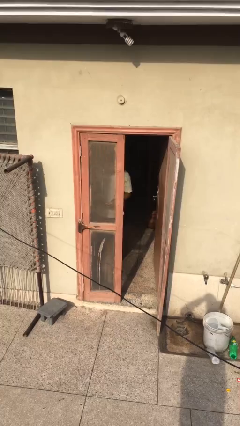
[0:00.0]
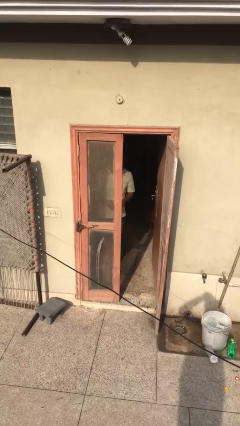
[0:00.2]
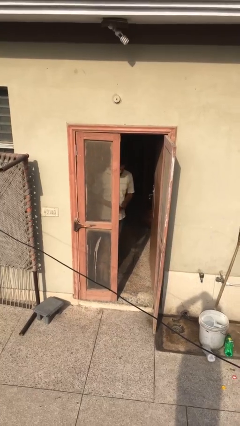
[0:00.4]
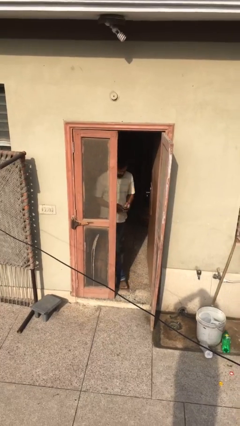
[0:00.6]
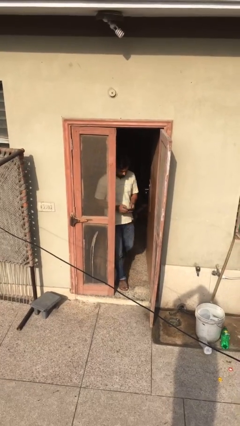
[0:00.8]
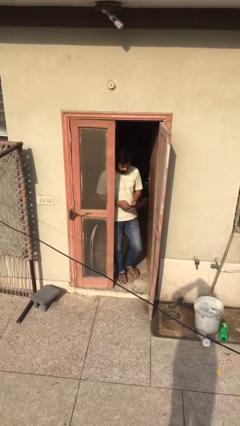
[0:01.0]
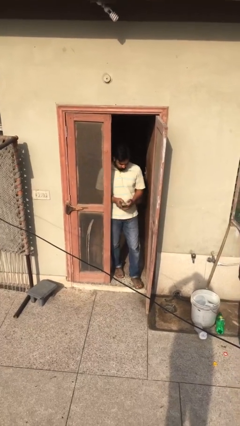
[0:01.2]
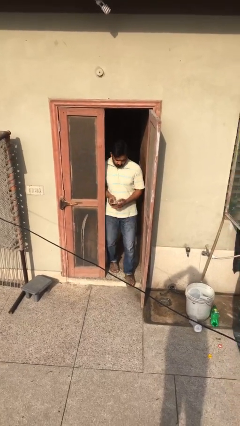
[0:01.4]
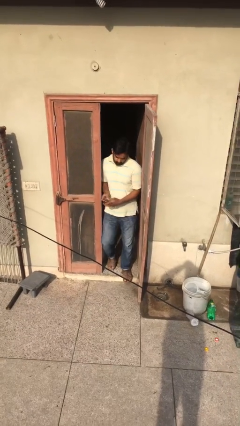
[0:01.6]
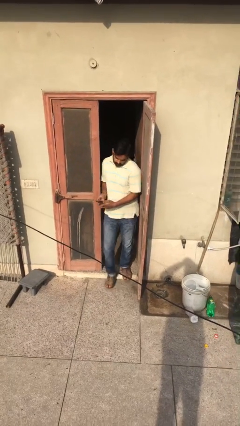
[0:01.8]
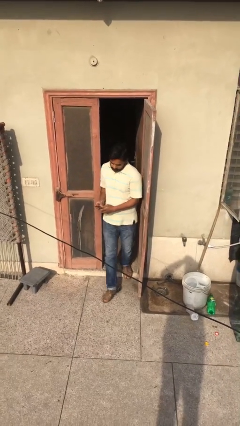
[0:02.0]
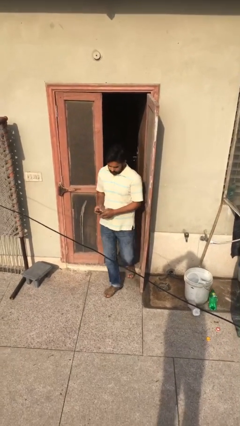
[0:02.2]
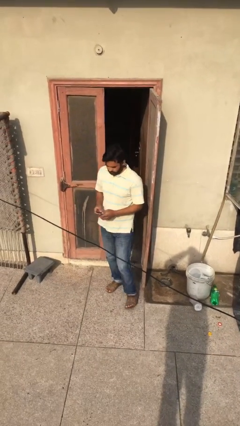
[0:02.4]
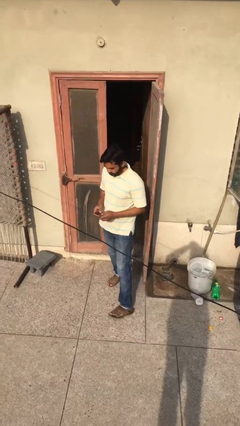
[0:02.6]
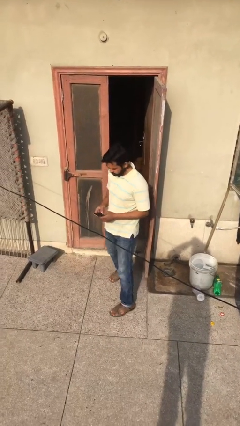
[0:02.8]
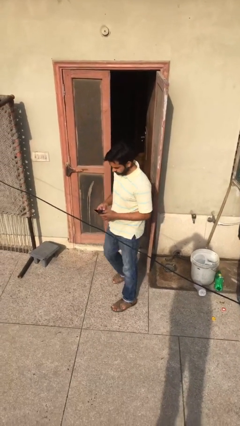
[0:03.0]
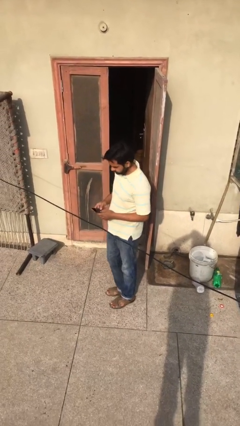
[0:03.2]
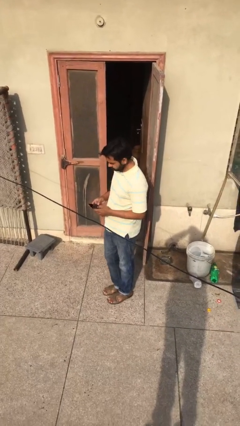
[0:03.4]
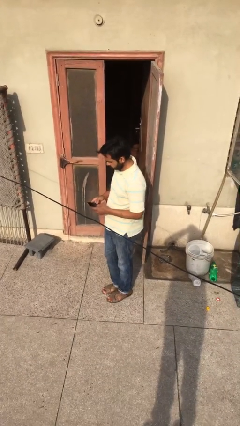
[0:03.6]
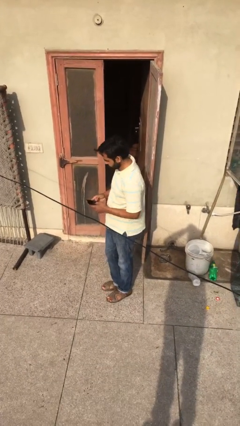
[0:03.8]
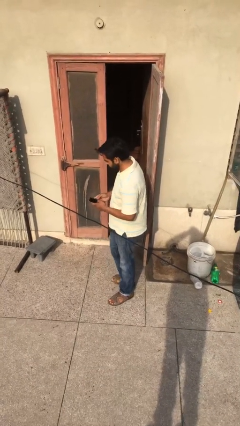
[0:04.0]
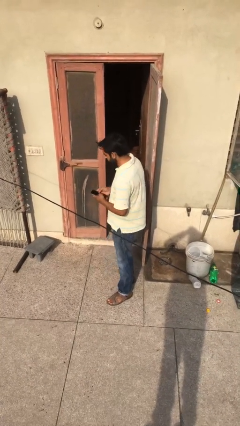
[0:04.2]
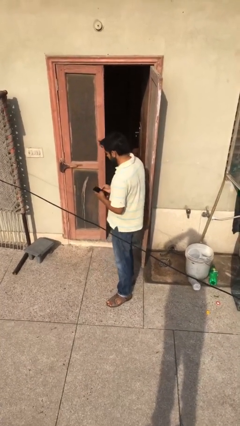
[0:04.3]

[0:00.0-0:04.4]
person enters scene through structure

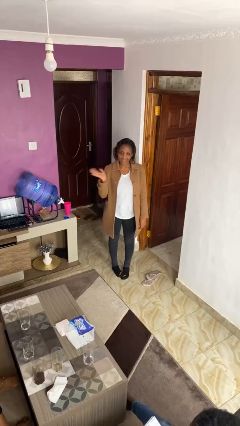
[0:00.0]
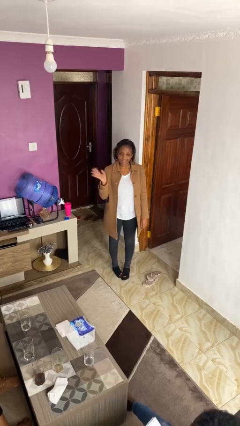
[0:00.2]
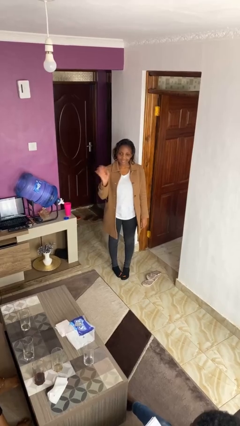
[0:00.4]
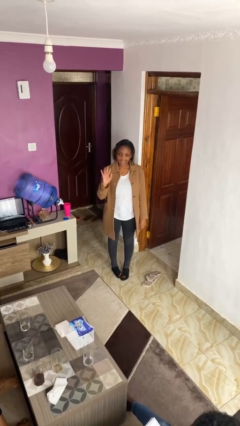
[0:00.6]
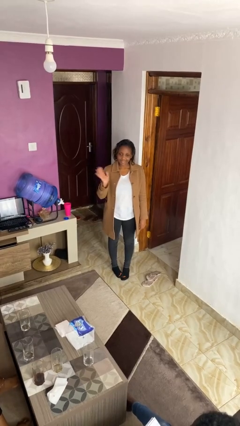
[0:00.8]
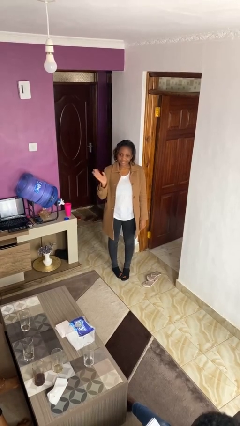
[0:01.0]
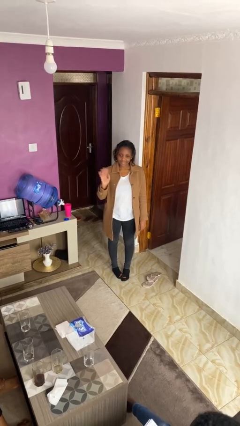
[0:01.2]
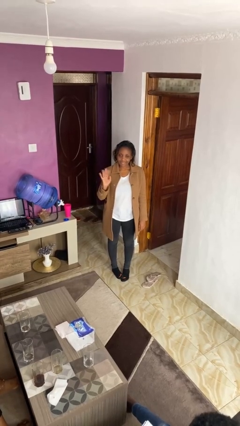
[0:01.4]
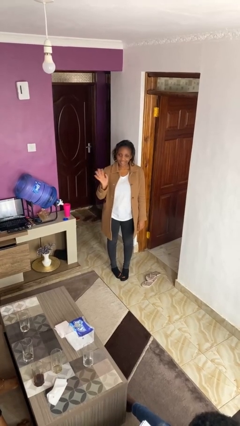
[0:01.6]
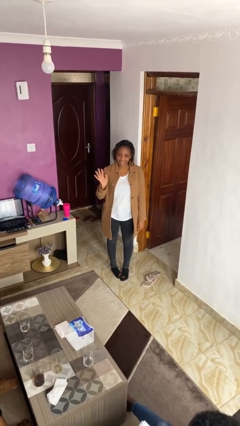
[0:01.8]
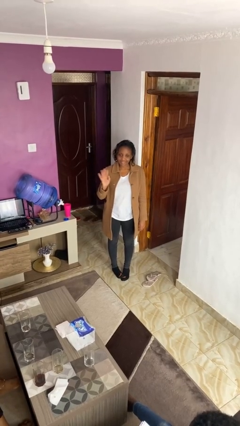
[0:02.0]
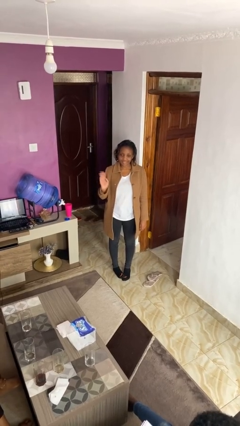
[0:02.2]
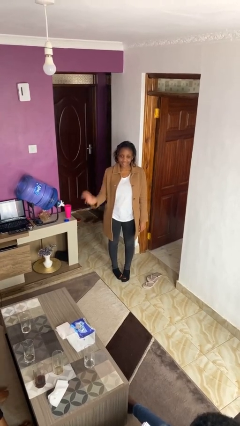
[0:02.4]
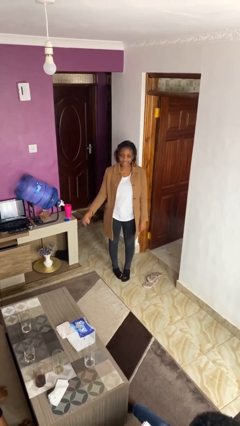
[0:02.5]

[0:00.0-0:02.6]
person waves at person

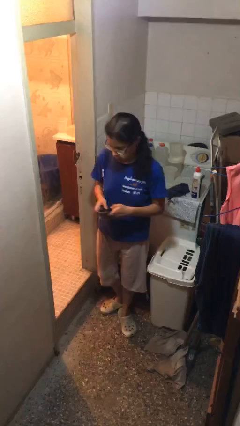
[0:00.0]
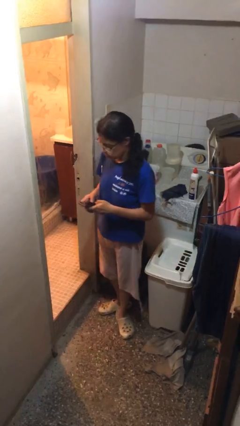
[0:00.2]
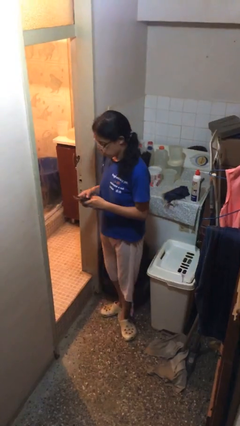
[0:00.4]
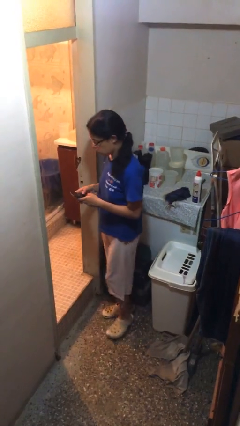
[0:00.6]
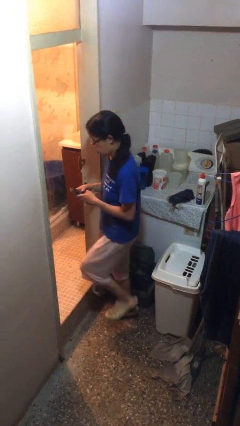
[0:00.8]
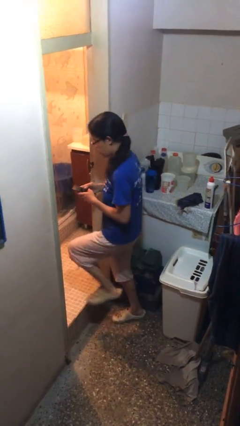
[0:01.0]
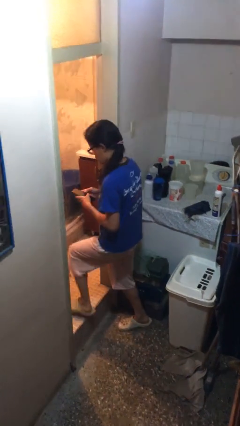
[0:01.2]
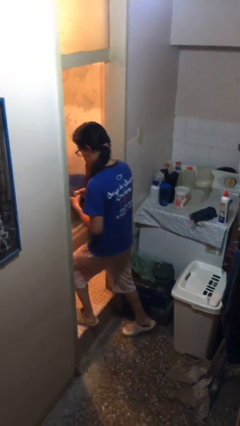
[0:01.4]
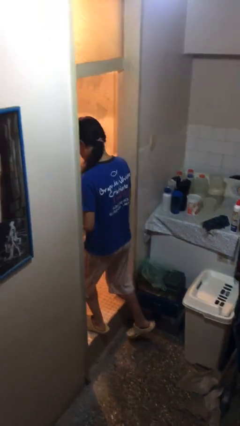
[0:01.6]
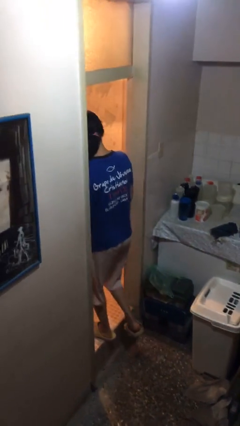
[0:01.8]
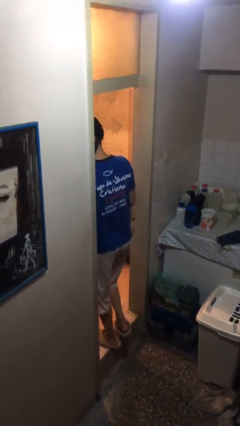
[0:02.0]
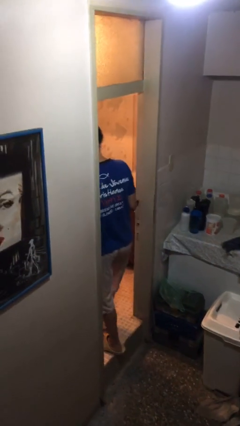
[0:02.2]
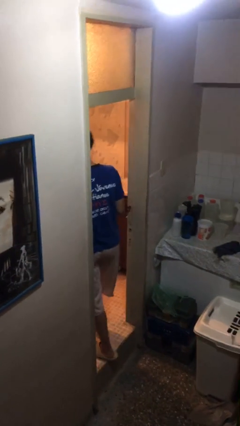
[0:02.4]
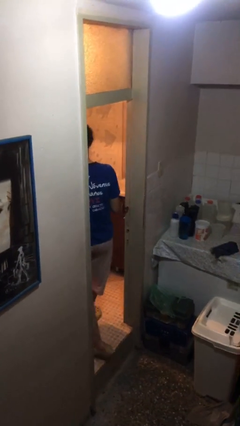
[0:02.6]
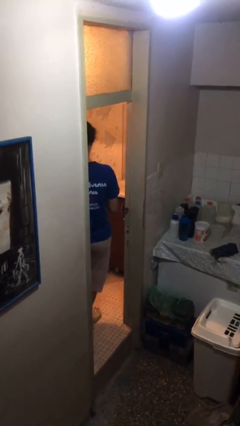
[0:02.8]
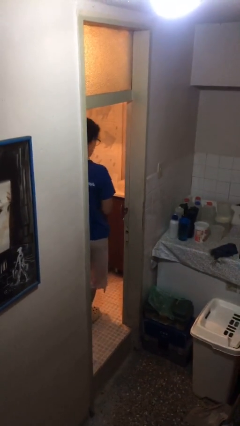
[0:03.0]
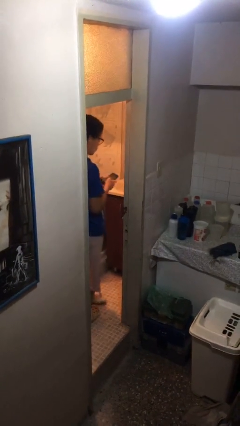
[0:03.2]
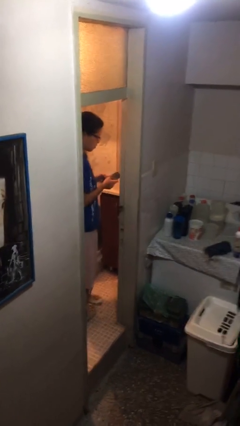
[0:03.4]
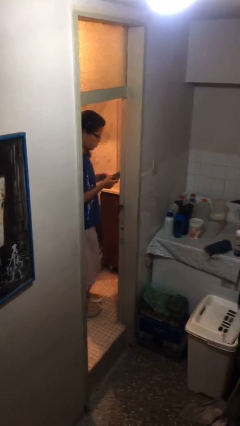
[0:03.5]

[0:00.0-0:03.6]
person exits scene through structure

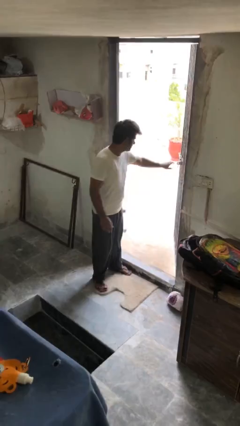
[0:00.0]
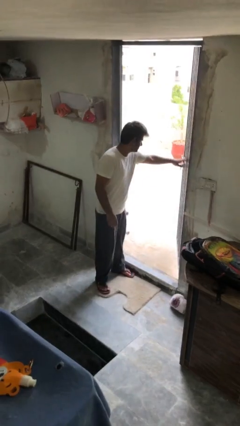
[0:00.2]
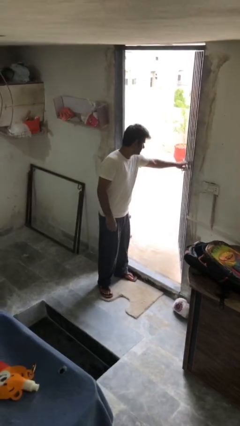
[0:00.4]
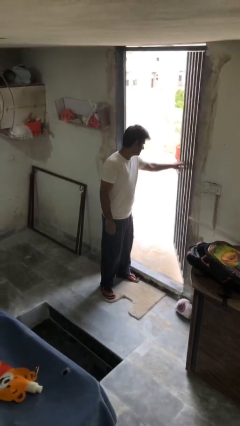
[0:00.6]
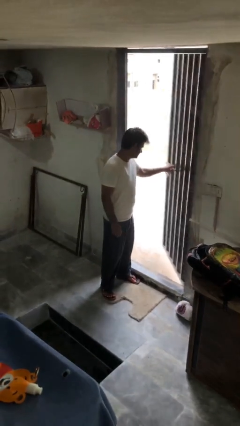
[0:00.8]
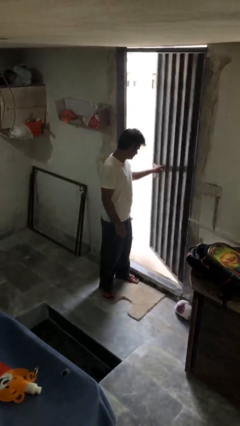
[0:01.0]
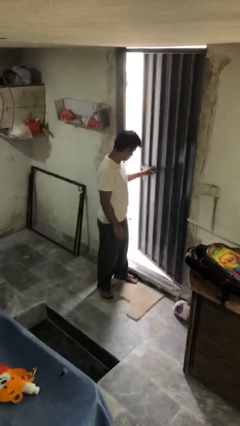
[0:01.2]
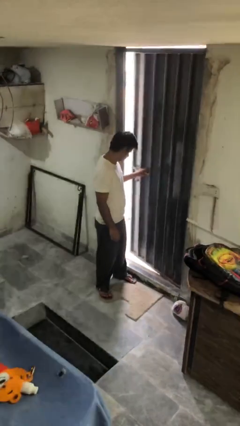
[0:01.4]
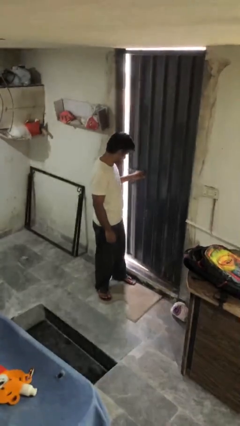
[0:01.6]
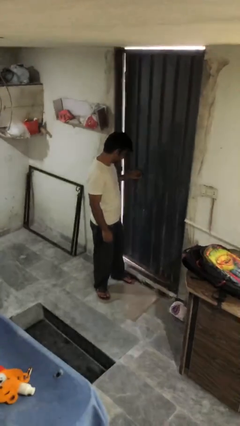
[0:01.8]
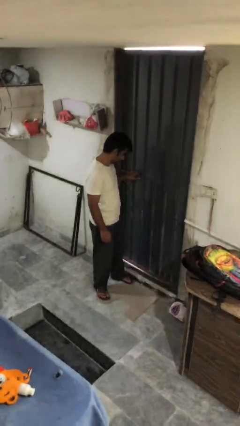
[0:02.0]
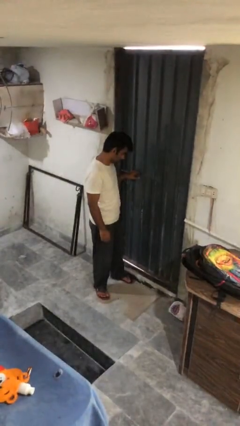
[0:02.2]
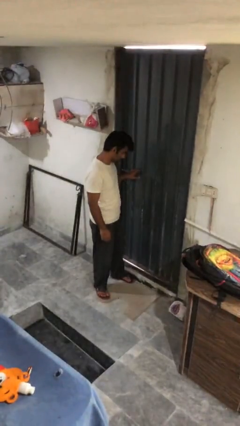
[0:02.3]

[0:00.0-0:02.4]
person closes facility door

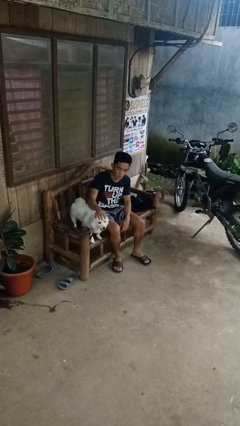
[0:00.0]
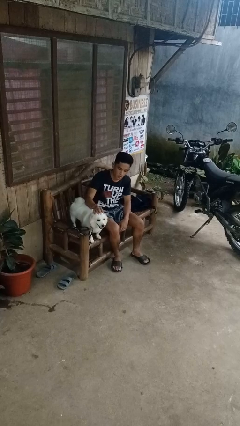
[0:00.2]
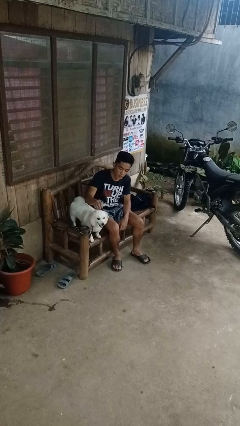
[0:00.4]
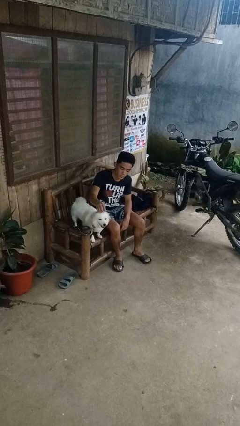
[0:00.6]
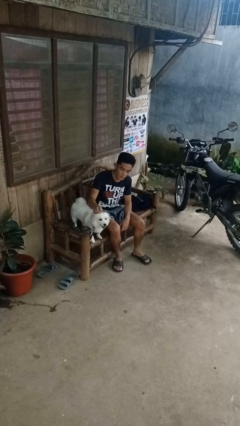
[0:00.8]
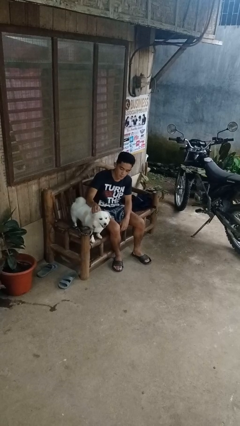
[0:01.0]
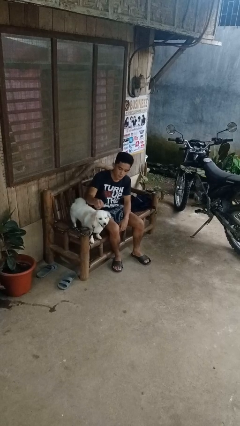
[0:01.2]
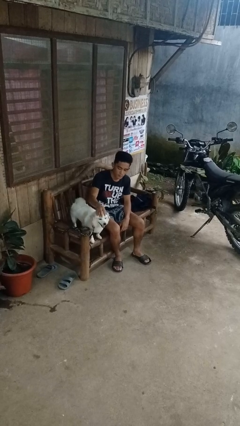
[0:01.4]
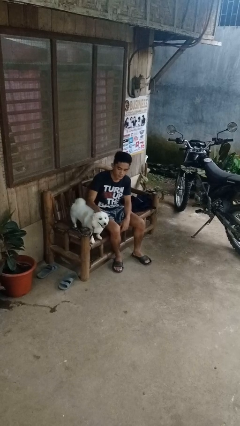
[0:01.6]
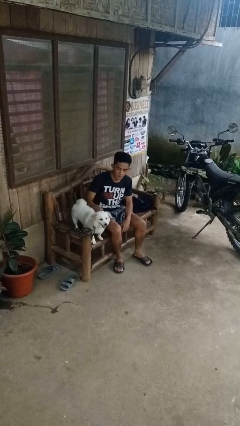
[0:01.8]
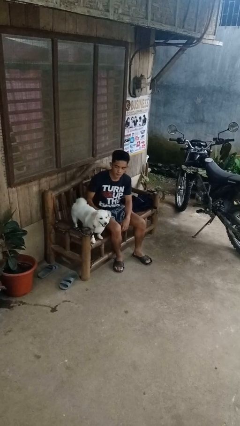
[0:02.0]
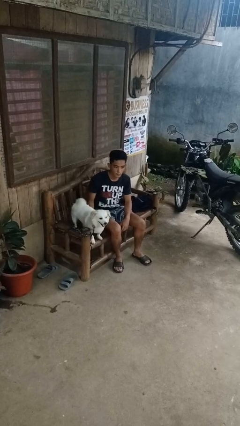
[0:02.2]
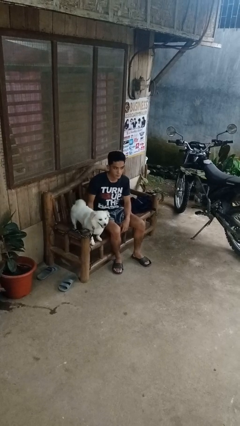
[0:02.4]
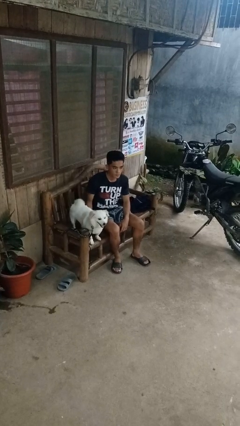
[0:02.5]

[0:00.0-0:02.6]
person pets dog

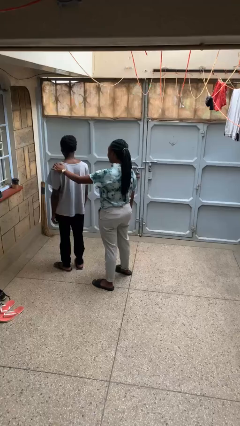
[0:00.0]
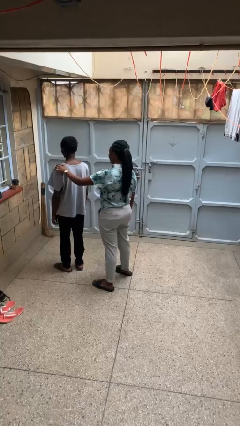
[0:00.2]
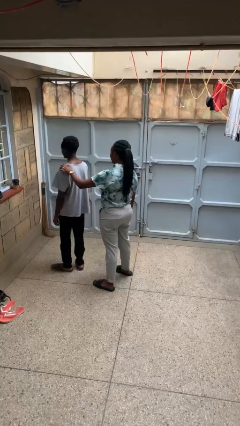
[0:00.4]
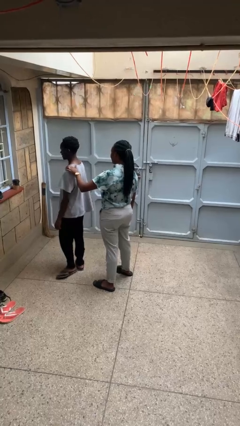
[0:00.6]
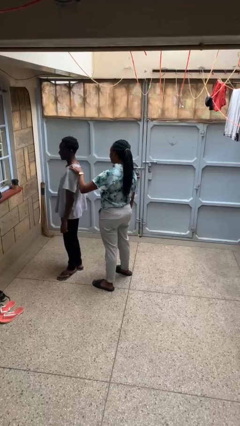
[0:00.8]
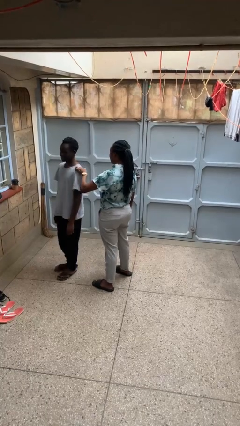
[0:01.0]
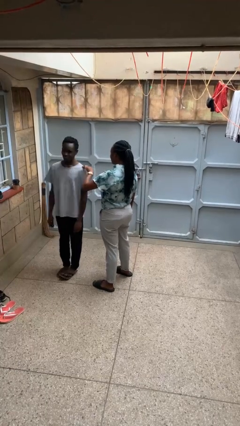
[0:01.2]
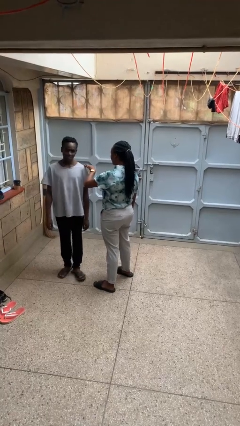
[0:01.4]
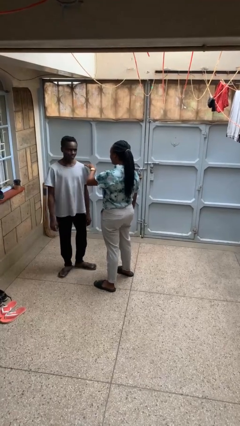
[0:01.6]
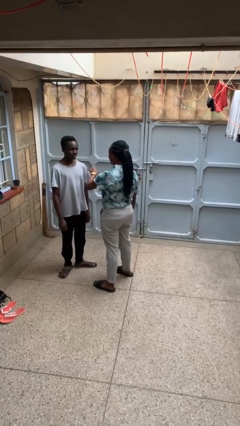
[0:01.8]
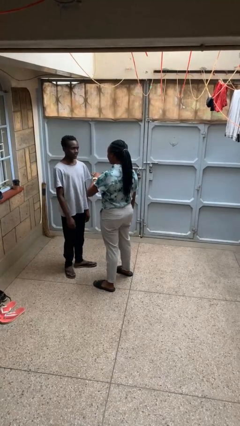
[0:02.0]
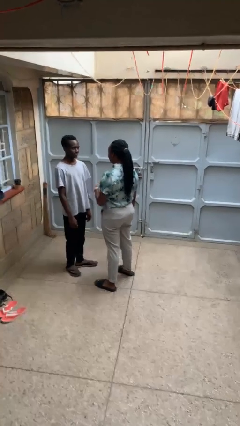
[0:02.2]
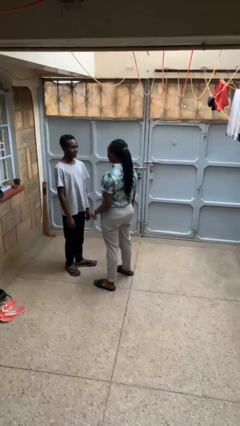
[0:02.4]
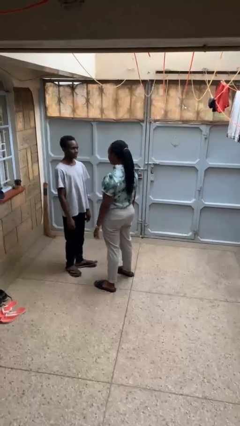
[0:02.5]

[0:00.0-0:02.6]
person spins person around
